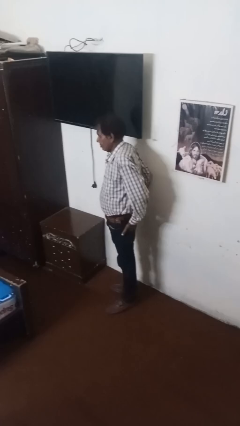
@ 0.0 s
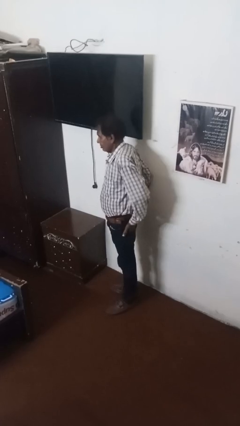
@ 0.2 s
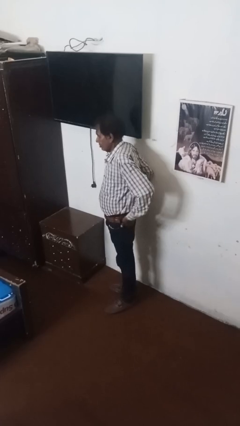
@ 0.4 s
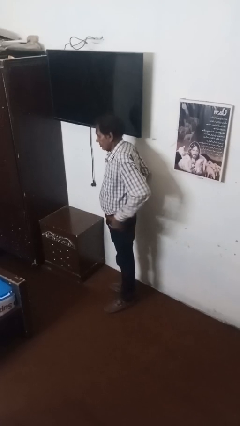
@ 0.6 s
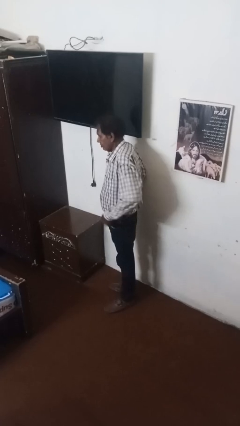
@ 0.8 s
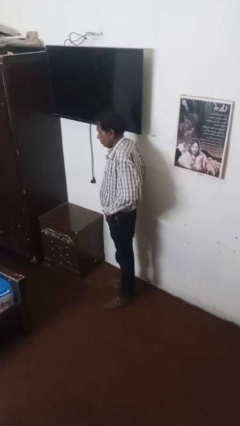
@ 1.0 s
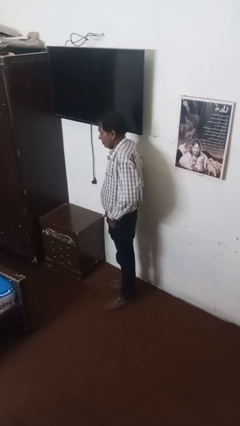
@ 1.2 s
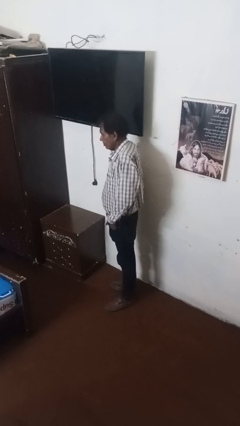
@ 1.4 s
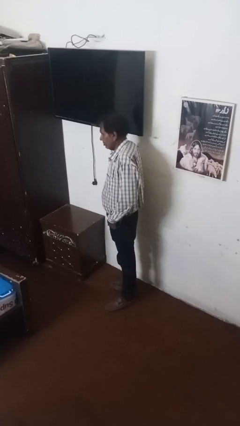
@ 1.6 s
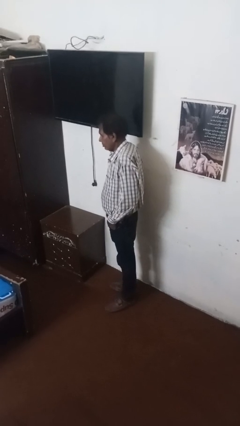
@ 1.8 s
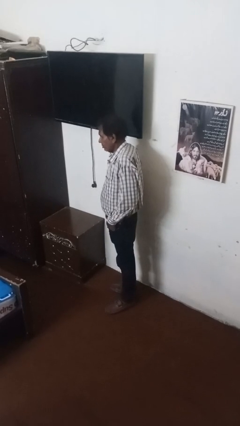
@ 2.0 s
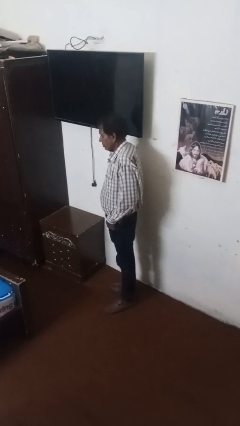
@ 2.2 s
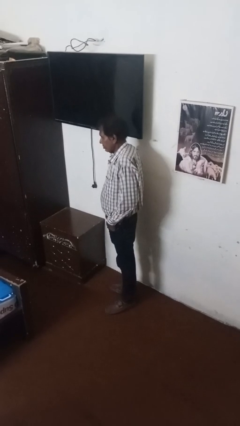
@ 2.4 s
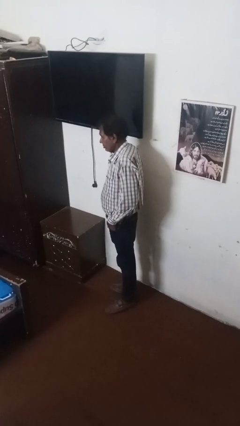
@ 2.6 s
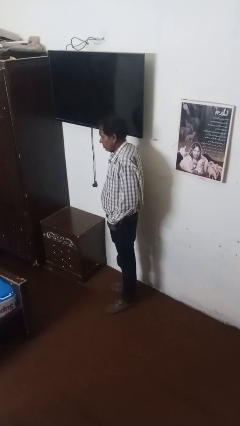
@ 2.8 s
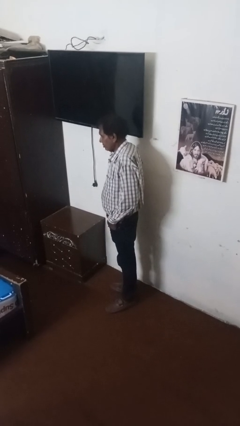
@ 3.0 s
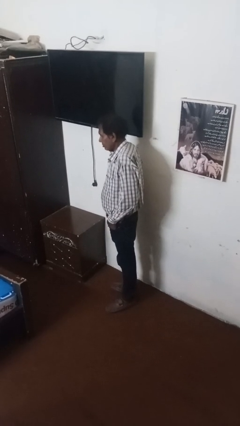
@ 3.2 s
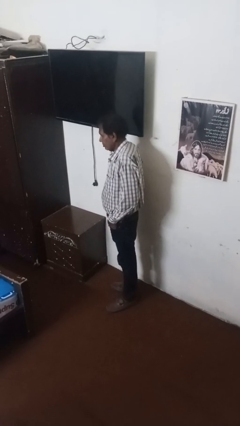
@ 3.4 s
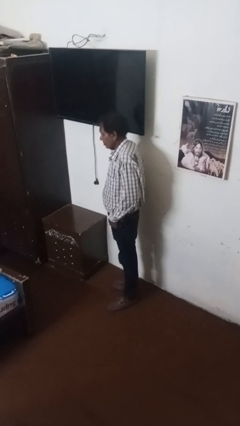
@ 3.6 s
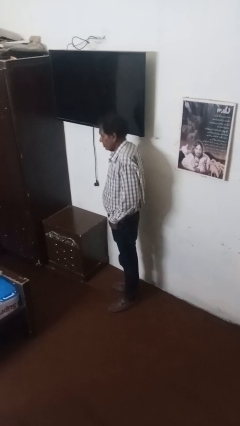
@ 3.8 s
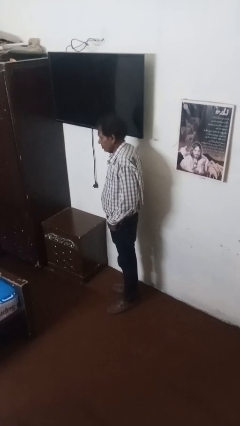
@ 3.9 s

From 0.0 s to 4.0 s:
person puts hands in back pockets

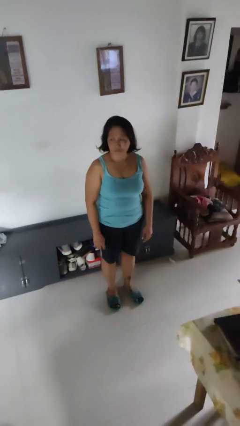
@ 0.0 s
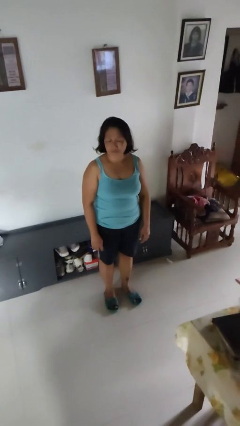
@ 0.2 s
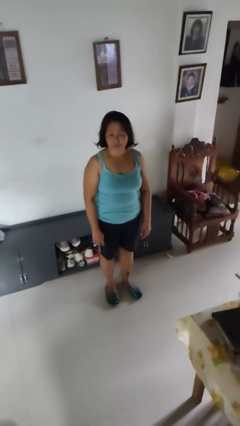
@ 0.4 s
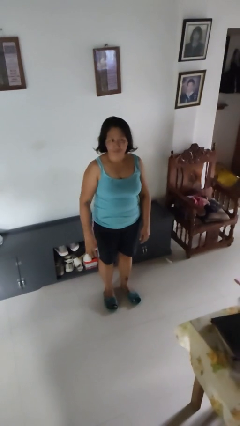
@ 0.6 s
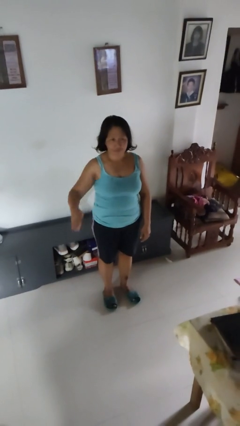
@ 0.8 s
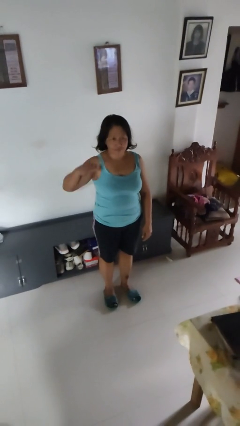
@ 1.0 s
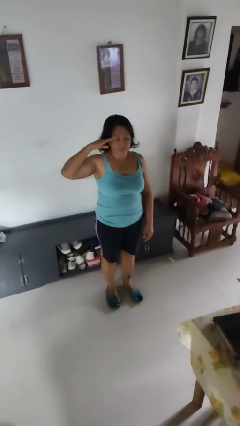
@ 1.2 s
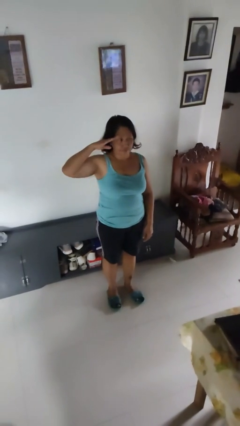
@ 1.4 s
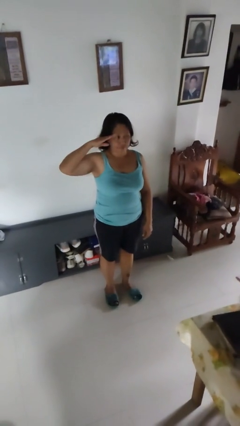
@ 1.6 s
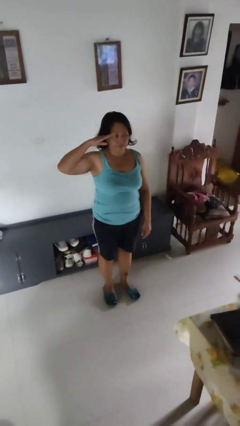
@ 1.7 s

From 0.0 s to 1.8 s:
person salutes

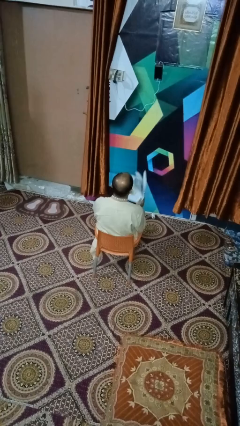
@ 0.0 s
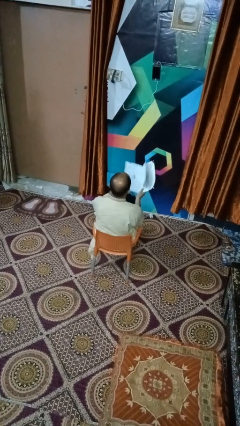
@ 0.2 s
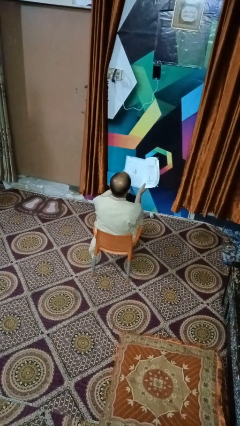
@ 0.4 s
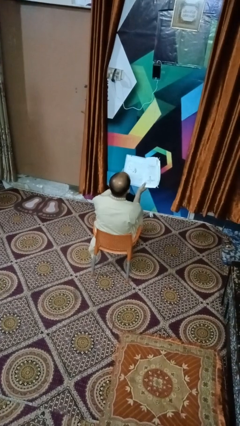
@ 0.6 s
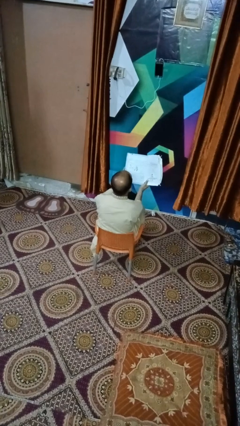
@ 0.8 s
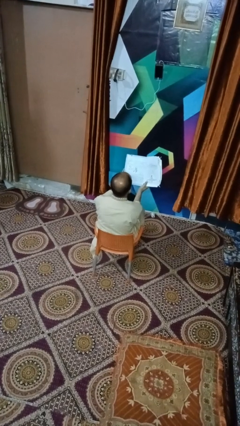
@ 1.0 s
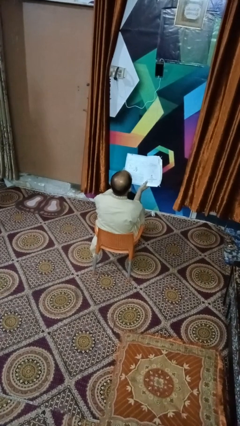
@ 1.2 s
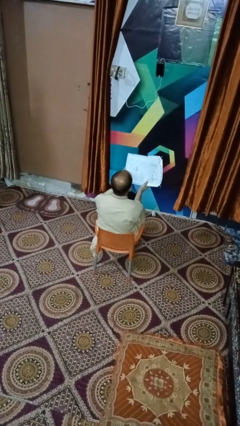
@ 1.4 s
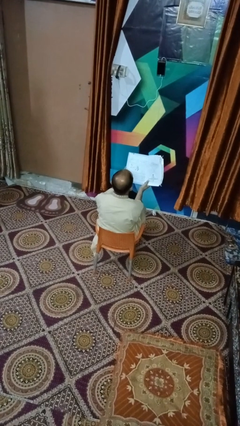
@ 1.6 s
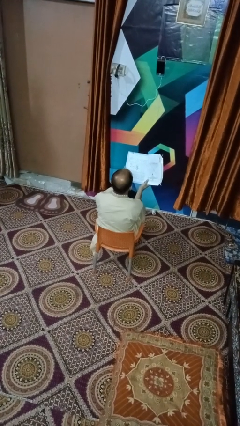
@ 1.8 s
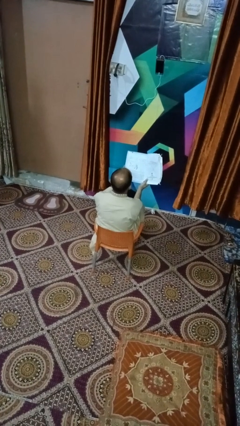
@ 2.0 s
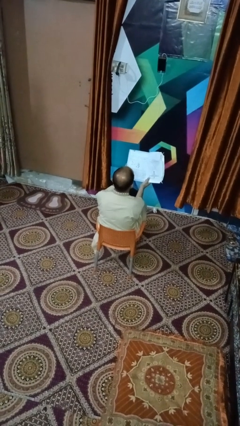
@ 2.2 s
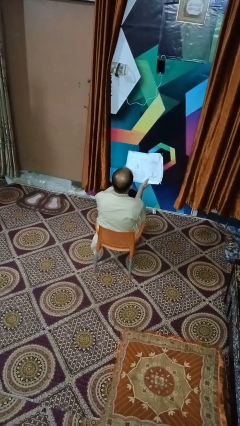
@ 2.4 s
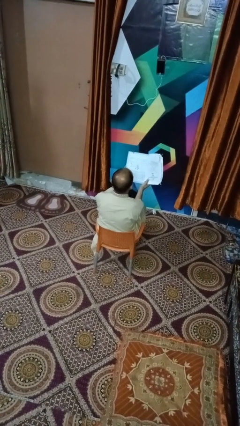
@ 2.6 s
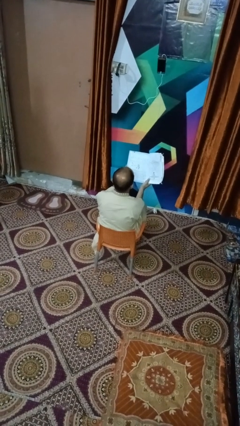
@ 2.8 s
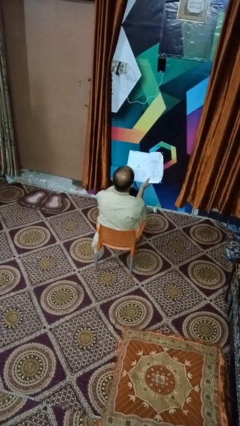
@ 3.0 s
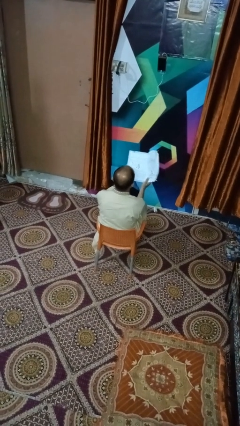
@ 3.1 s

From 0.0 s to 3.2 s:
person reads book

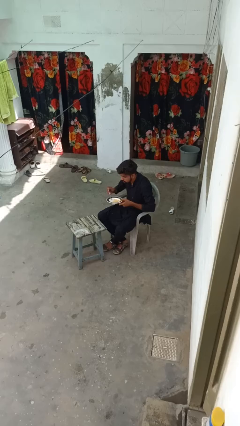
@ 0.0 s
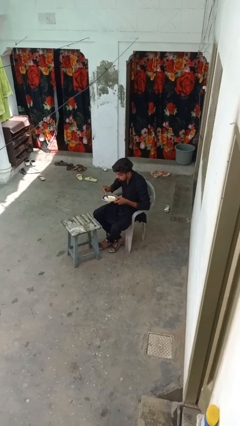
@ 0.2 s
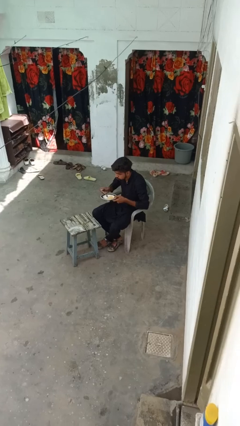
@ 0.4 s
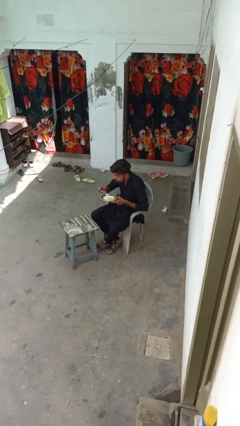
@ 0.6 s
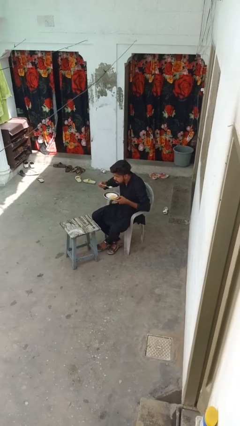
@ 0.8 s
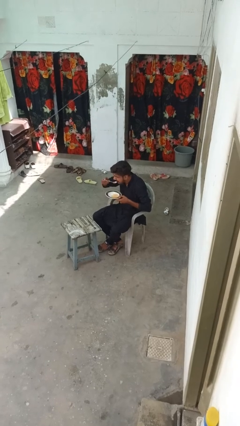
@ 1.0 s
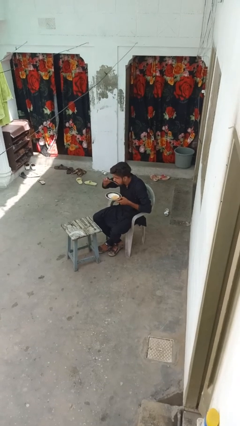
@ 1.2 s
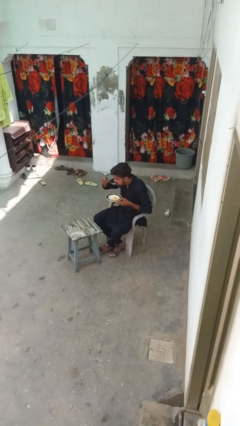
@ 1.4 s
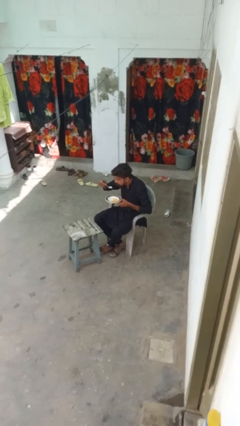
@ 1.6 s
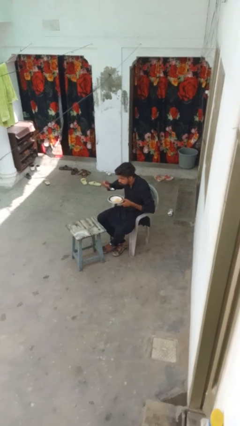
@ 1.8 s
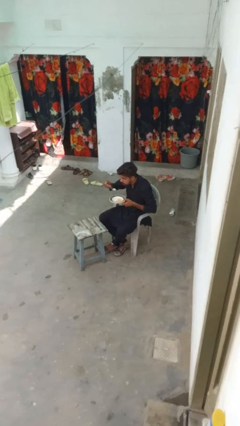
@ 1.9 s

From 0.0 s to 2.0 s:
person eats with utensil

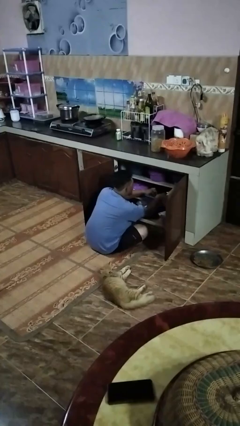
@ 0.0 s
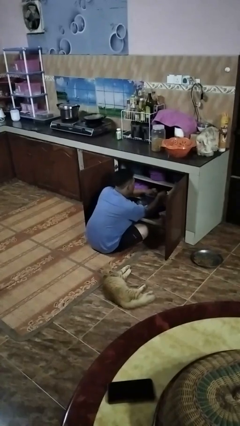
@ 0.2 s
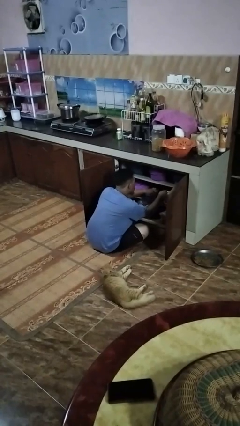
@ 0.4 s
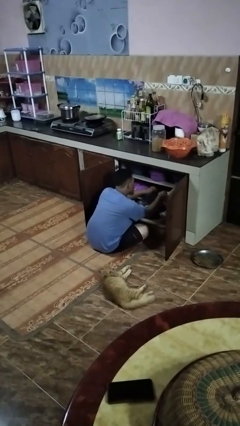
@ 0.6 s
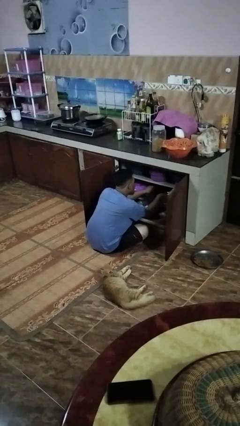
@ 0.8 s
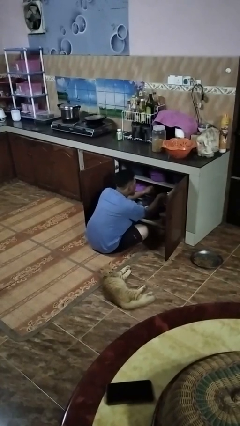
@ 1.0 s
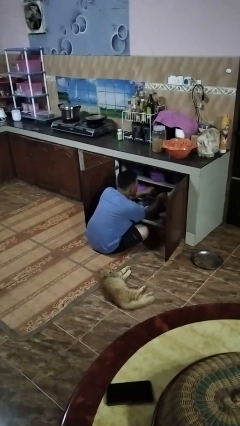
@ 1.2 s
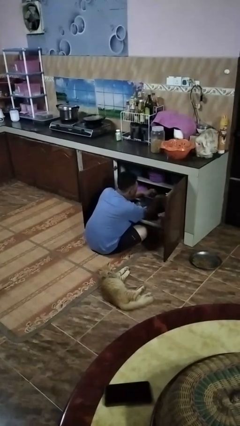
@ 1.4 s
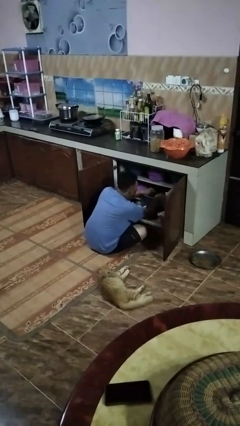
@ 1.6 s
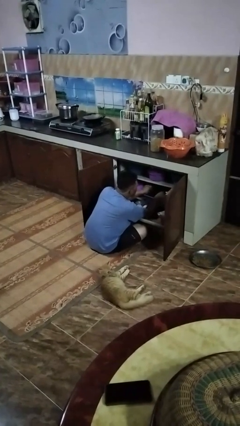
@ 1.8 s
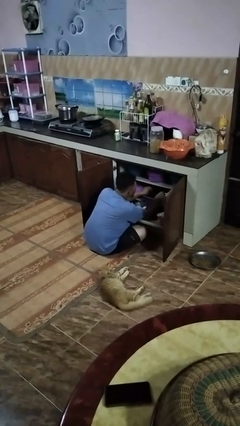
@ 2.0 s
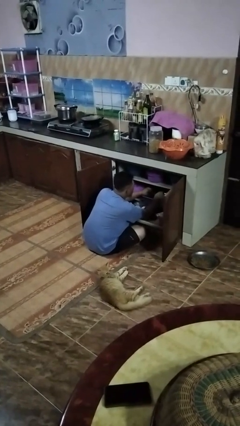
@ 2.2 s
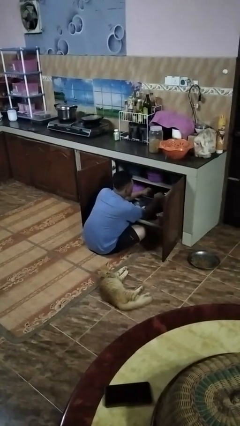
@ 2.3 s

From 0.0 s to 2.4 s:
person searches in kitchen drawer

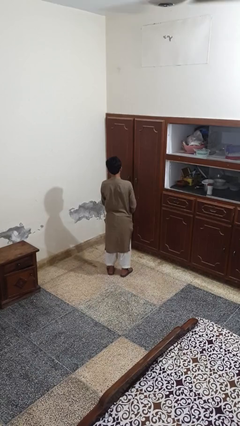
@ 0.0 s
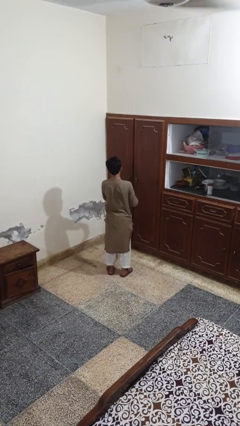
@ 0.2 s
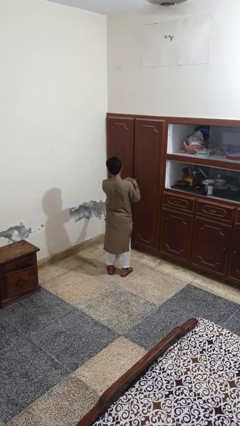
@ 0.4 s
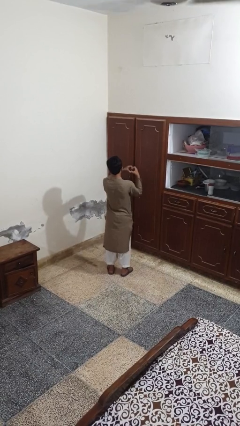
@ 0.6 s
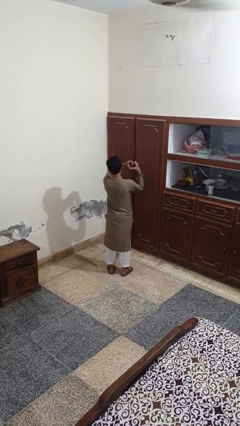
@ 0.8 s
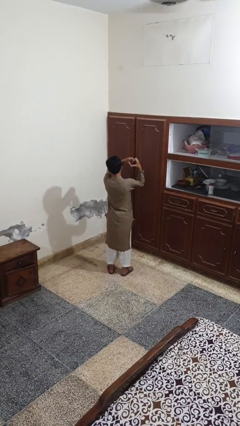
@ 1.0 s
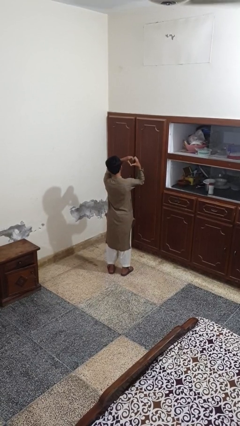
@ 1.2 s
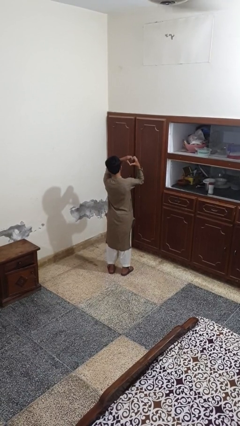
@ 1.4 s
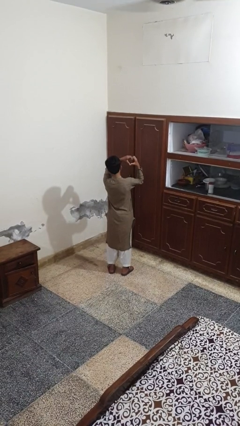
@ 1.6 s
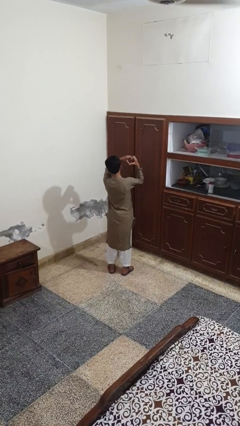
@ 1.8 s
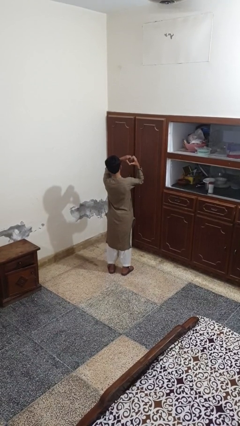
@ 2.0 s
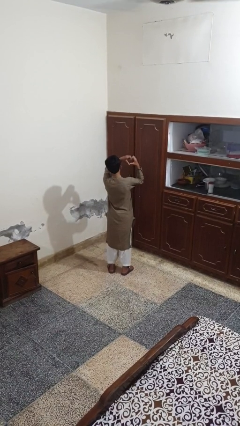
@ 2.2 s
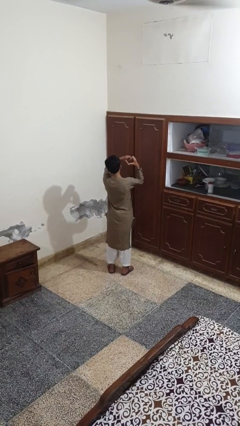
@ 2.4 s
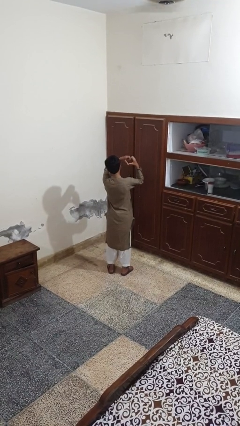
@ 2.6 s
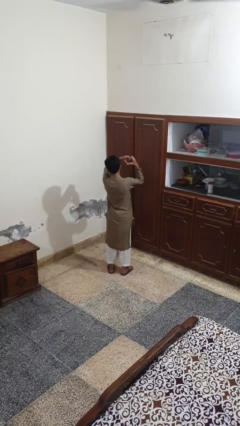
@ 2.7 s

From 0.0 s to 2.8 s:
person gestures heart

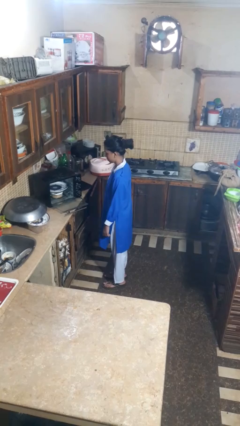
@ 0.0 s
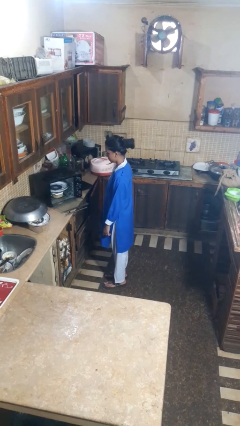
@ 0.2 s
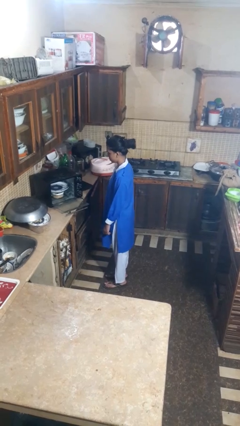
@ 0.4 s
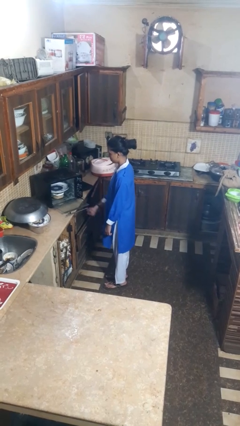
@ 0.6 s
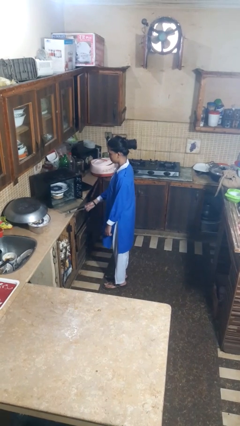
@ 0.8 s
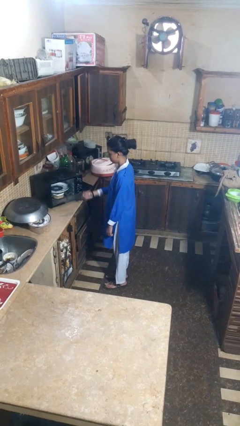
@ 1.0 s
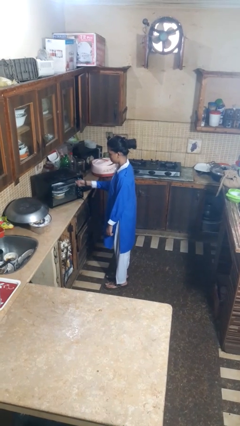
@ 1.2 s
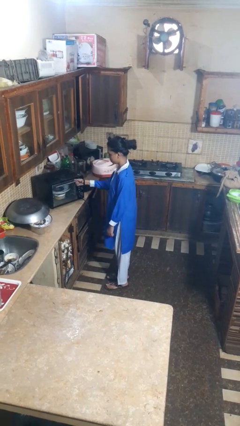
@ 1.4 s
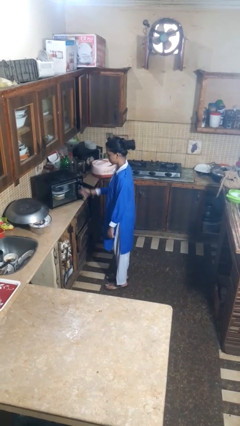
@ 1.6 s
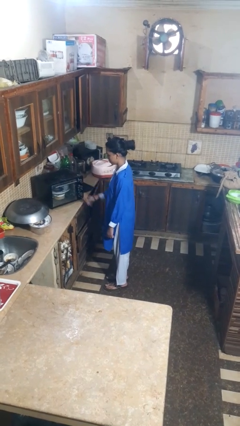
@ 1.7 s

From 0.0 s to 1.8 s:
person closes dishwasher
